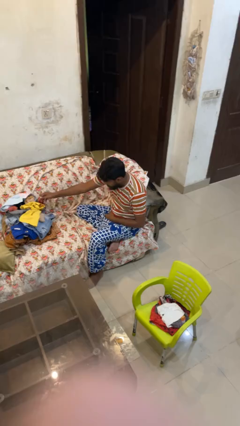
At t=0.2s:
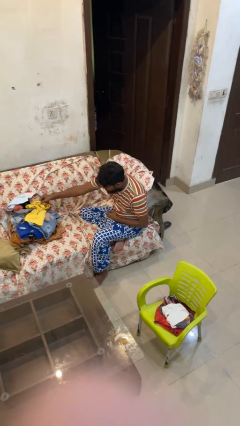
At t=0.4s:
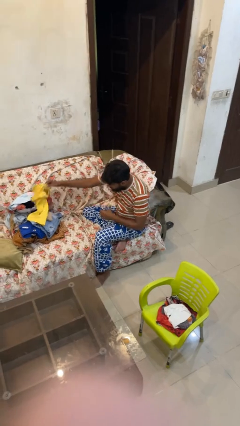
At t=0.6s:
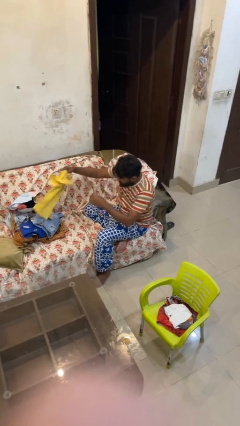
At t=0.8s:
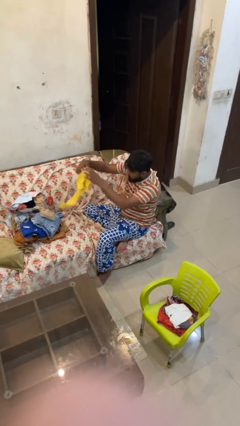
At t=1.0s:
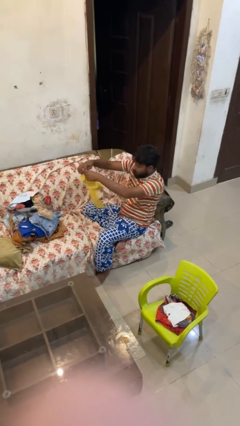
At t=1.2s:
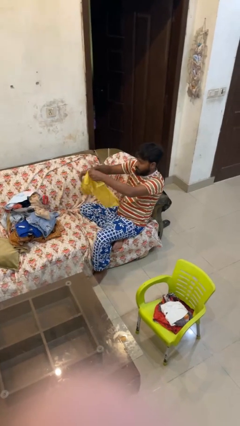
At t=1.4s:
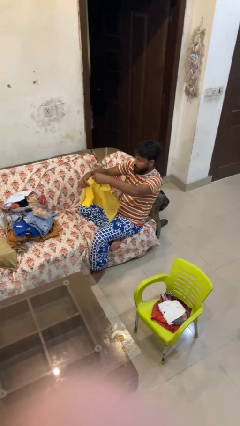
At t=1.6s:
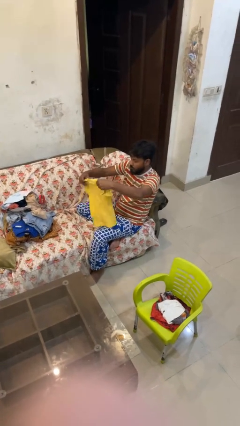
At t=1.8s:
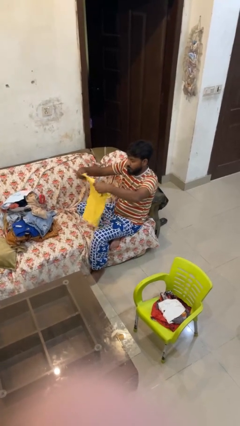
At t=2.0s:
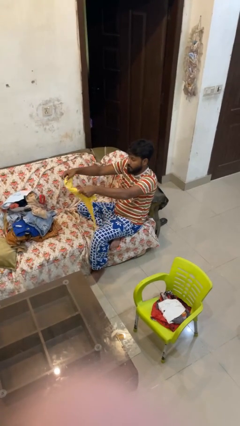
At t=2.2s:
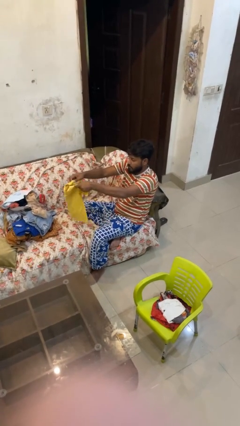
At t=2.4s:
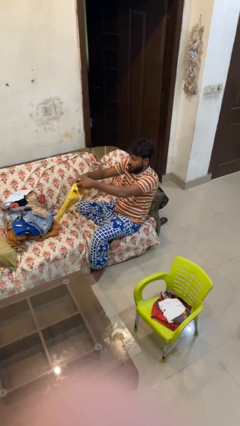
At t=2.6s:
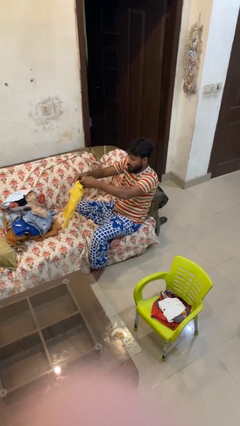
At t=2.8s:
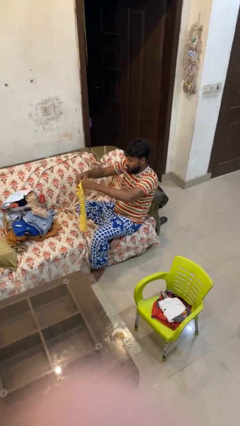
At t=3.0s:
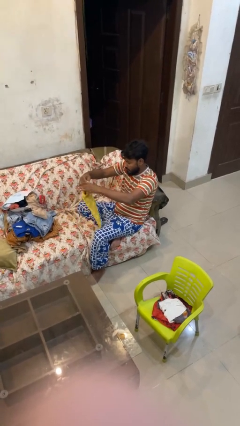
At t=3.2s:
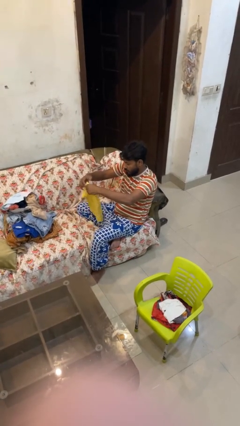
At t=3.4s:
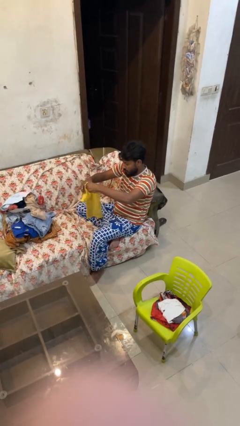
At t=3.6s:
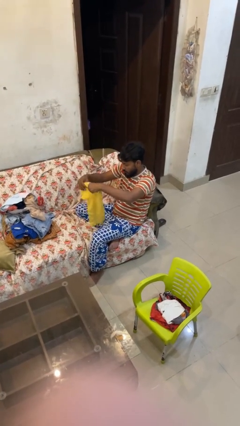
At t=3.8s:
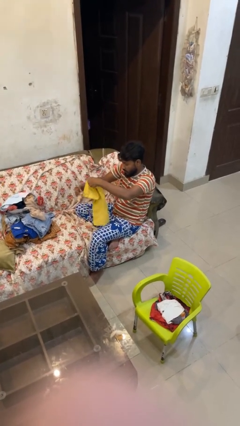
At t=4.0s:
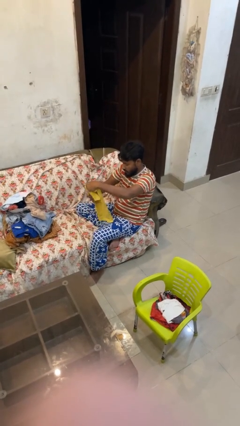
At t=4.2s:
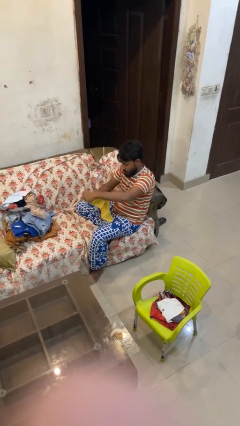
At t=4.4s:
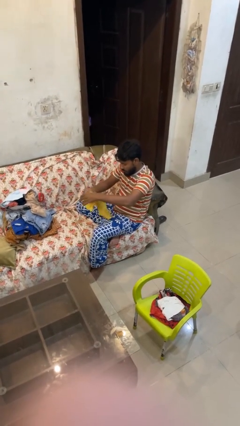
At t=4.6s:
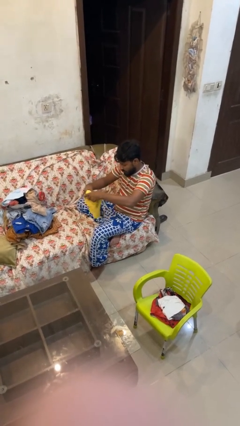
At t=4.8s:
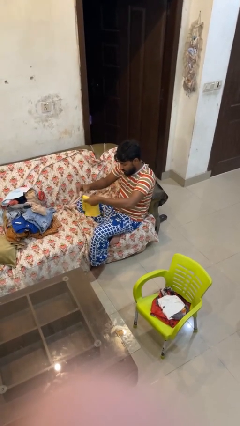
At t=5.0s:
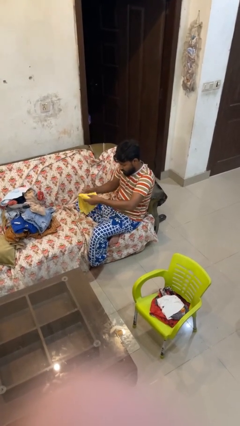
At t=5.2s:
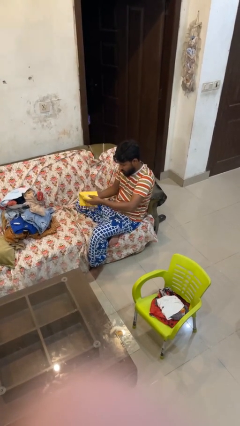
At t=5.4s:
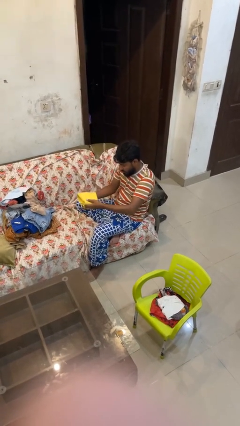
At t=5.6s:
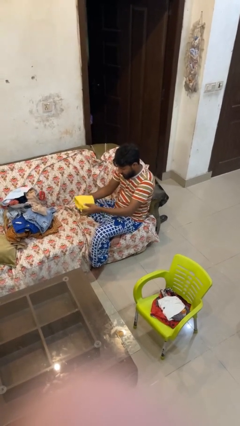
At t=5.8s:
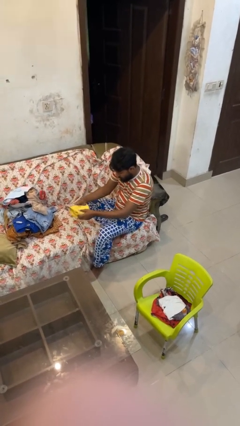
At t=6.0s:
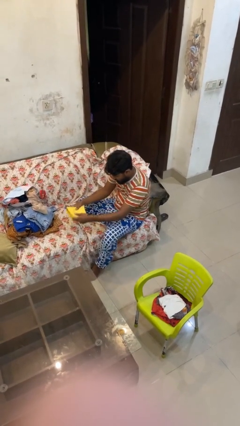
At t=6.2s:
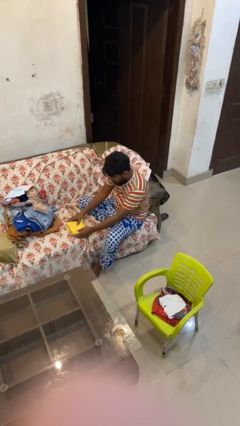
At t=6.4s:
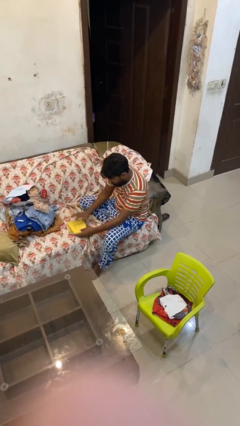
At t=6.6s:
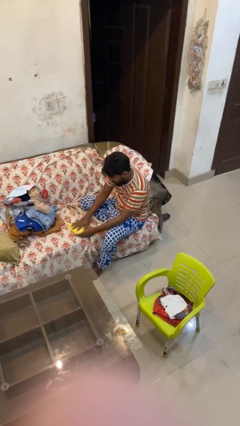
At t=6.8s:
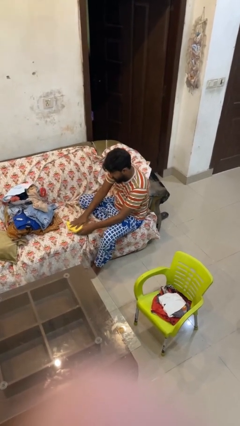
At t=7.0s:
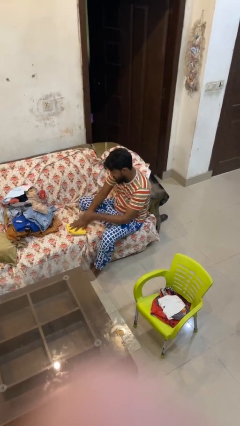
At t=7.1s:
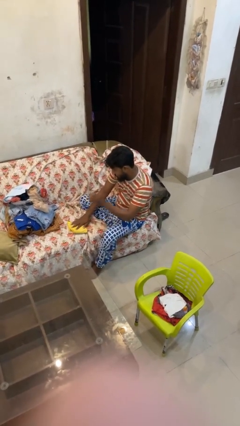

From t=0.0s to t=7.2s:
person folds shirt

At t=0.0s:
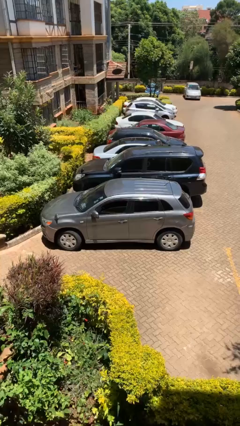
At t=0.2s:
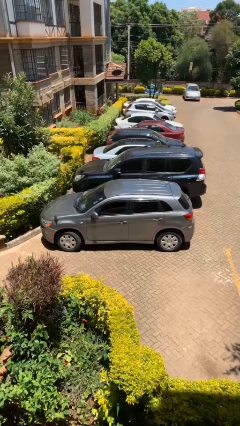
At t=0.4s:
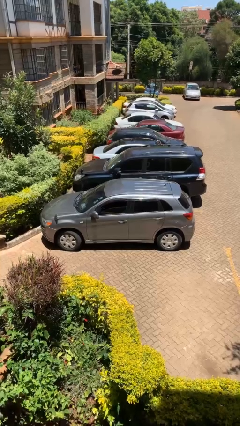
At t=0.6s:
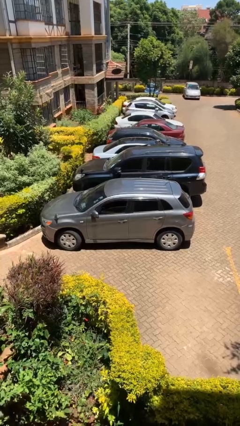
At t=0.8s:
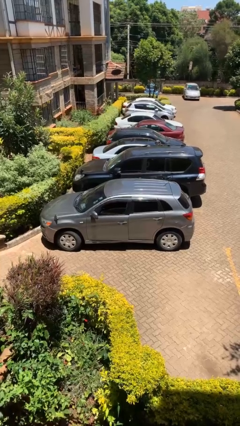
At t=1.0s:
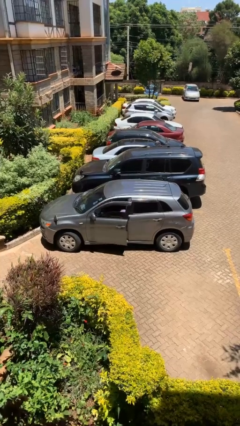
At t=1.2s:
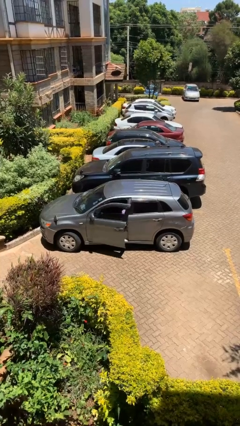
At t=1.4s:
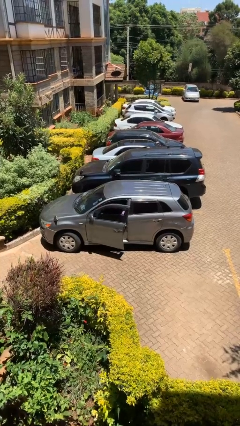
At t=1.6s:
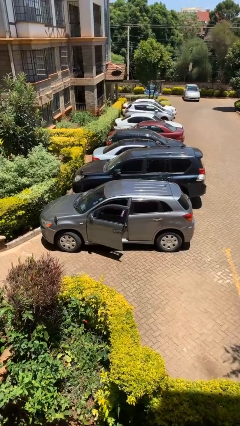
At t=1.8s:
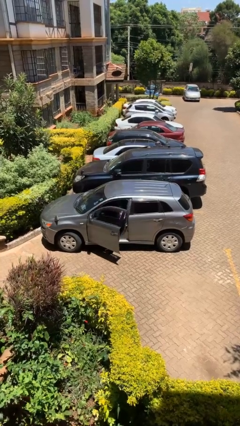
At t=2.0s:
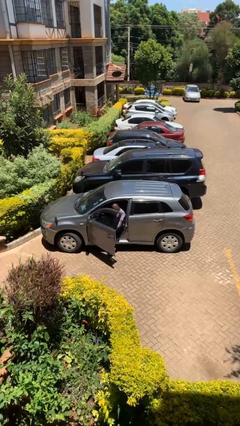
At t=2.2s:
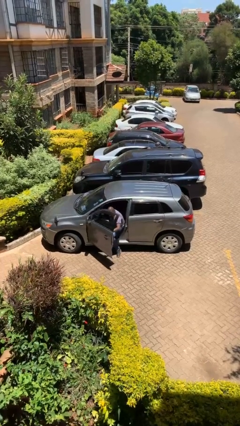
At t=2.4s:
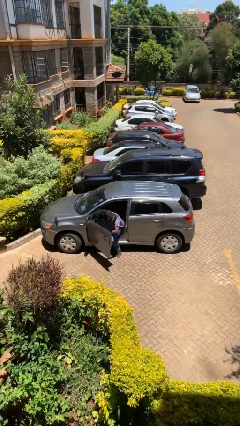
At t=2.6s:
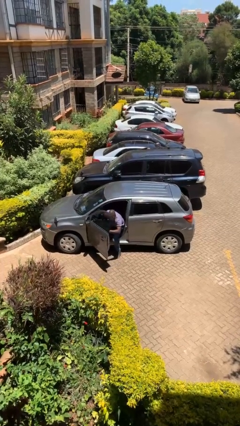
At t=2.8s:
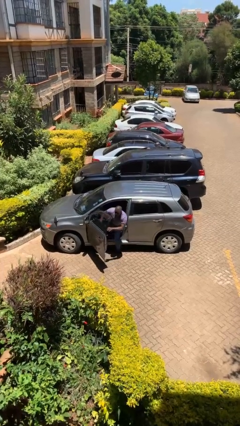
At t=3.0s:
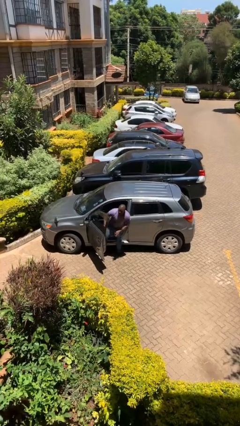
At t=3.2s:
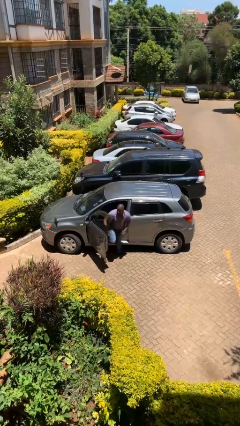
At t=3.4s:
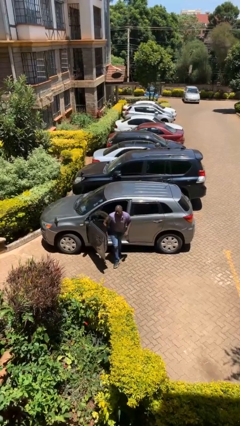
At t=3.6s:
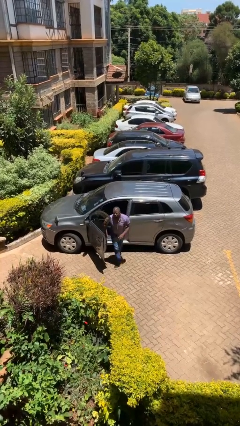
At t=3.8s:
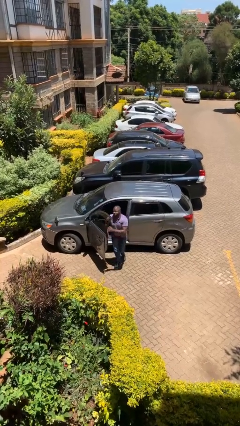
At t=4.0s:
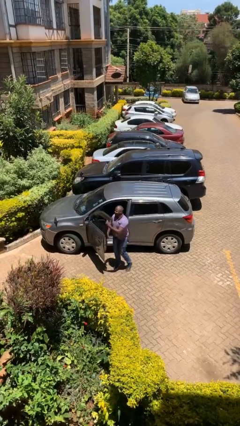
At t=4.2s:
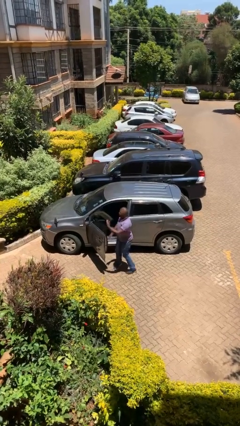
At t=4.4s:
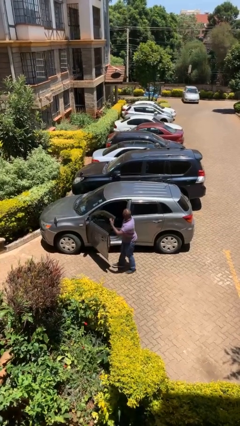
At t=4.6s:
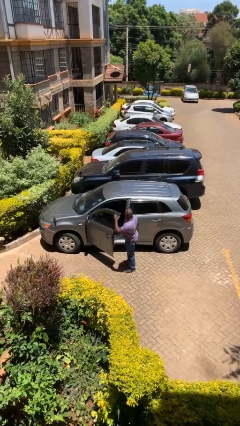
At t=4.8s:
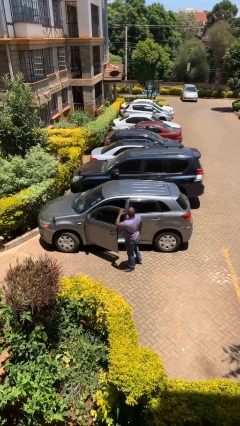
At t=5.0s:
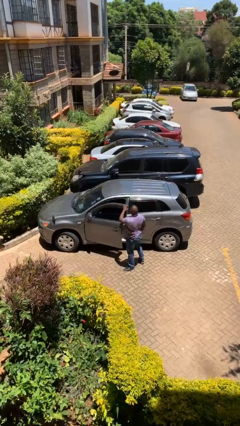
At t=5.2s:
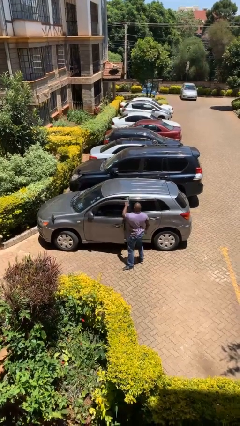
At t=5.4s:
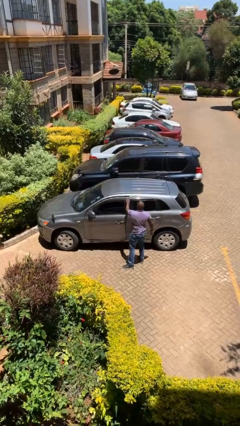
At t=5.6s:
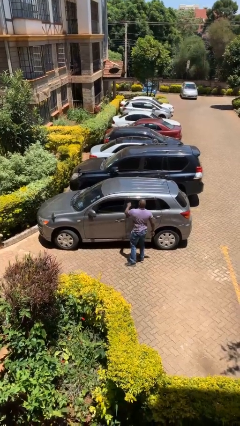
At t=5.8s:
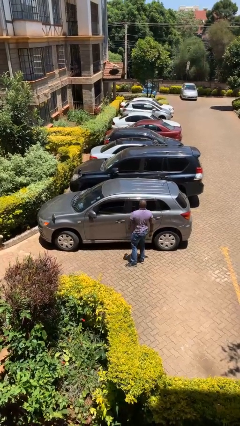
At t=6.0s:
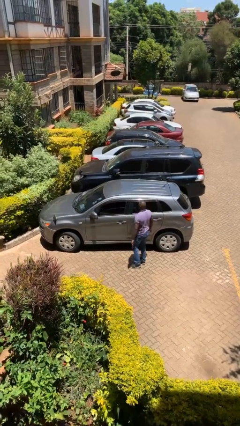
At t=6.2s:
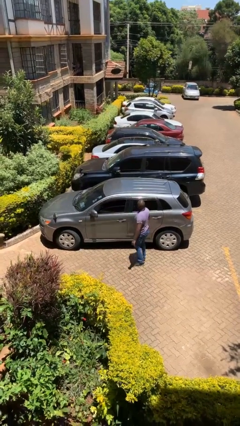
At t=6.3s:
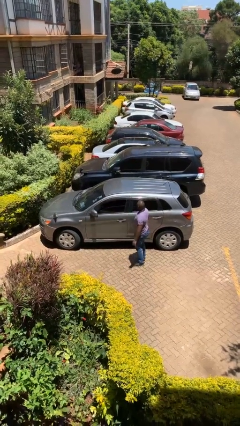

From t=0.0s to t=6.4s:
car drops off person

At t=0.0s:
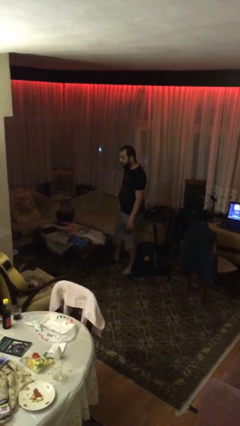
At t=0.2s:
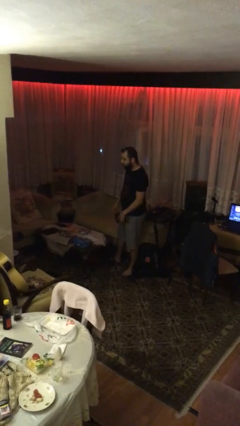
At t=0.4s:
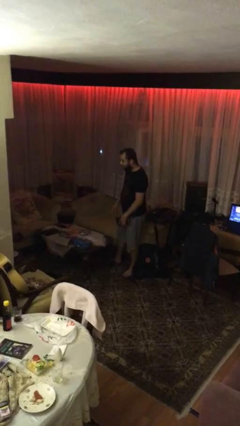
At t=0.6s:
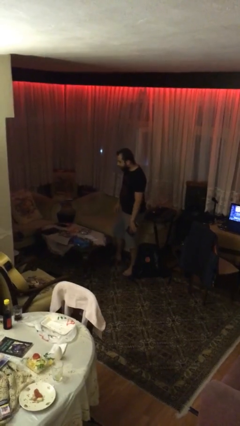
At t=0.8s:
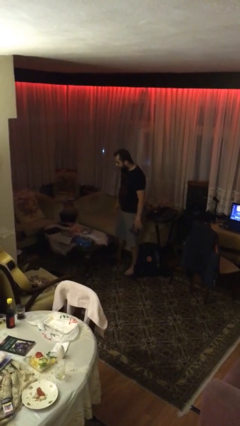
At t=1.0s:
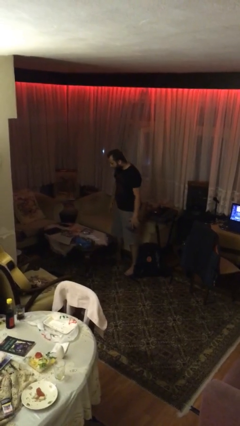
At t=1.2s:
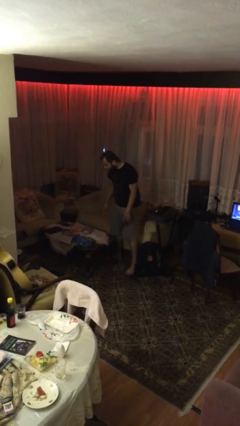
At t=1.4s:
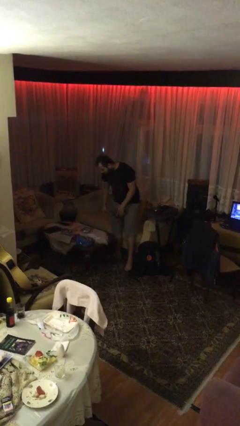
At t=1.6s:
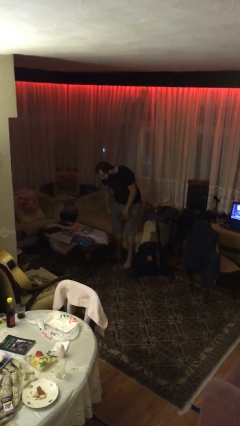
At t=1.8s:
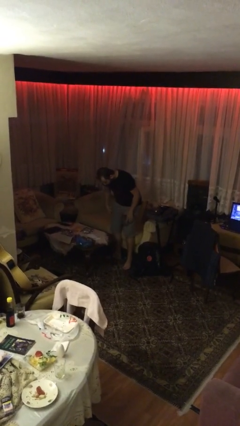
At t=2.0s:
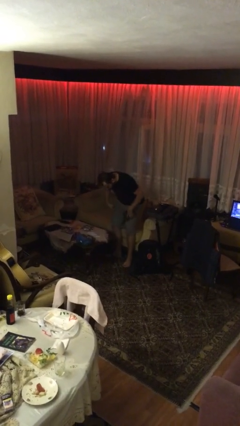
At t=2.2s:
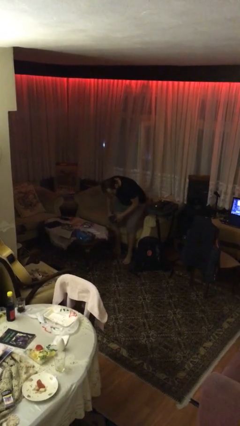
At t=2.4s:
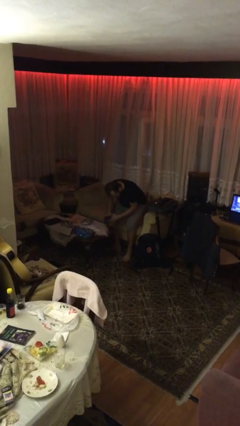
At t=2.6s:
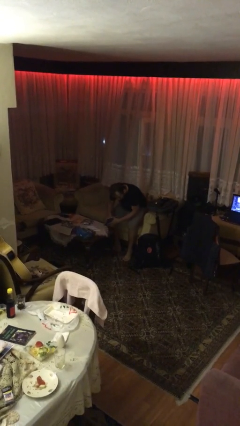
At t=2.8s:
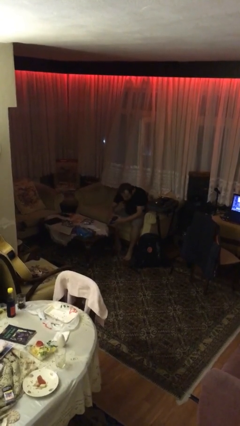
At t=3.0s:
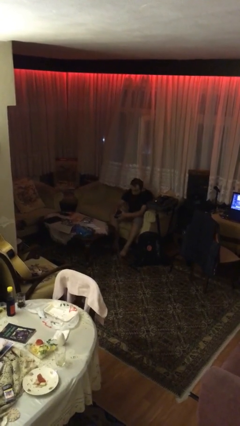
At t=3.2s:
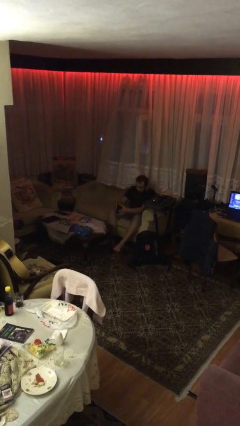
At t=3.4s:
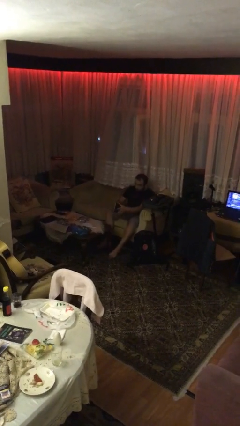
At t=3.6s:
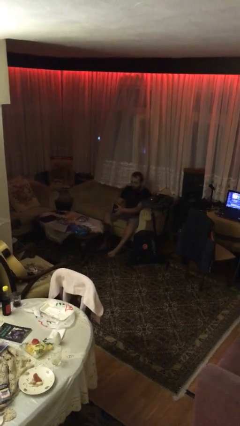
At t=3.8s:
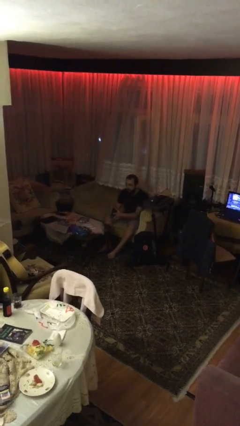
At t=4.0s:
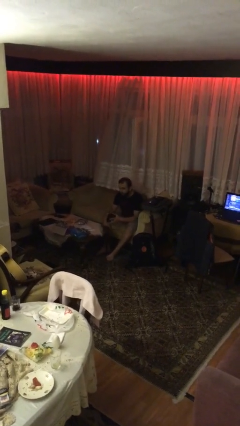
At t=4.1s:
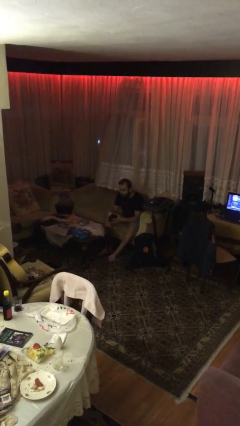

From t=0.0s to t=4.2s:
person sits down

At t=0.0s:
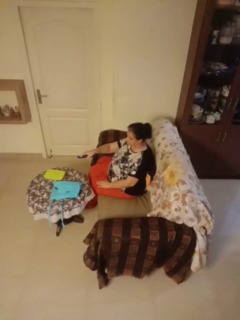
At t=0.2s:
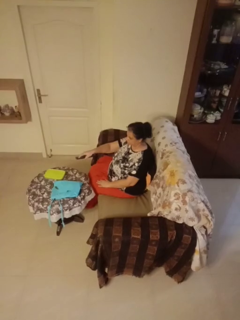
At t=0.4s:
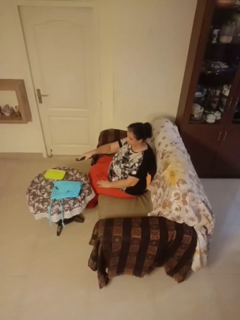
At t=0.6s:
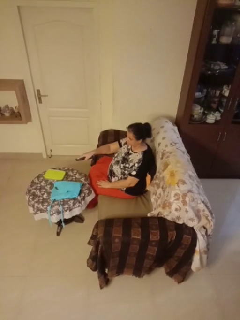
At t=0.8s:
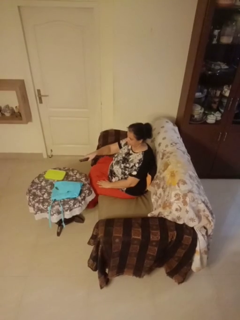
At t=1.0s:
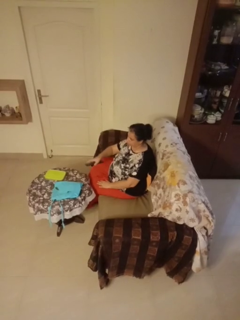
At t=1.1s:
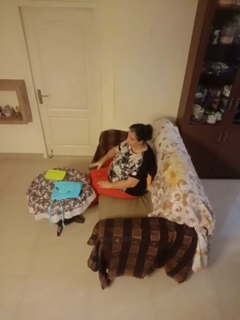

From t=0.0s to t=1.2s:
person uses television remote
